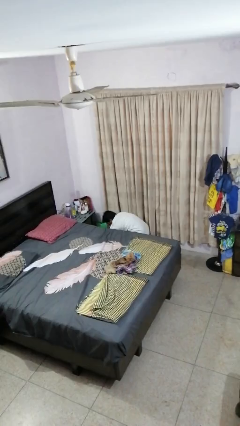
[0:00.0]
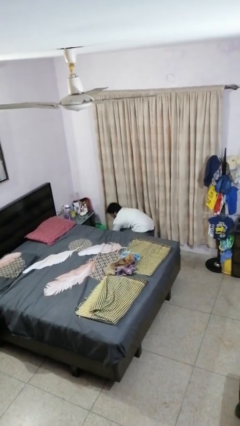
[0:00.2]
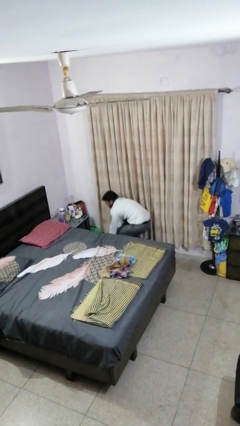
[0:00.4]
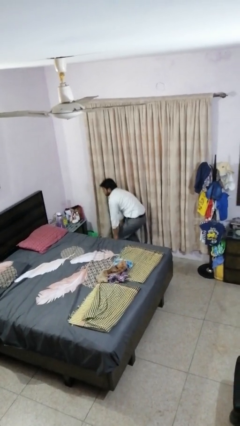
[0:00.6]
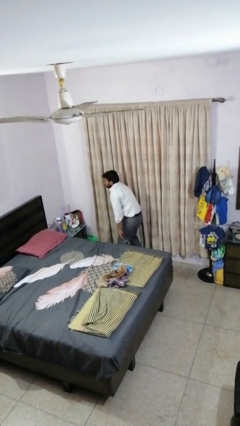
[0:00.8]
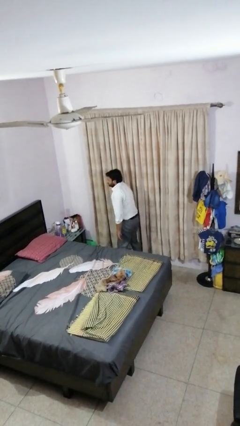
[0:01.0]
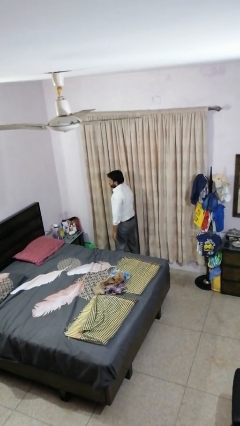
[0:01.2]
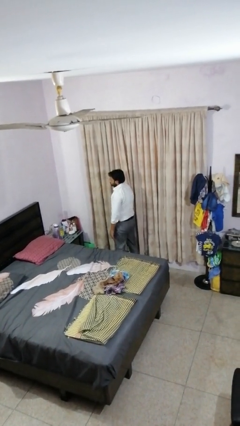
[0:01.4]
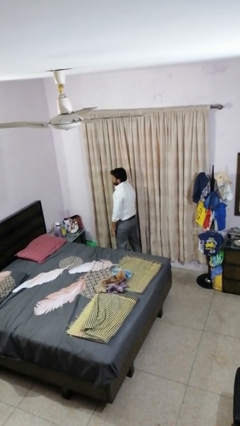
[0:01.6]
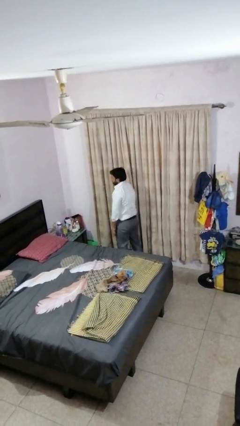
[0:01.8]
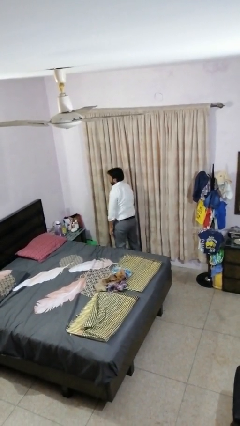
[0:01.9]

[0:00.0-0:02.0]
person stands up from floor

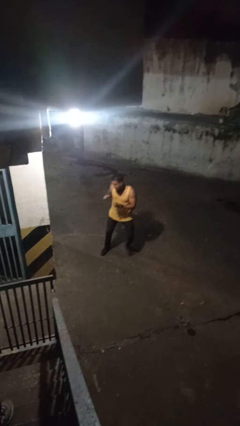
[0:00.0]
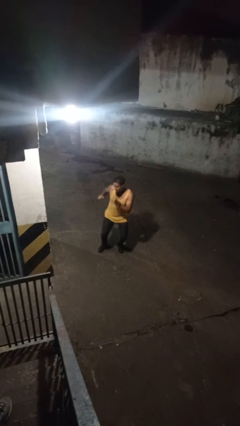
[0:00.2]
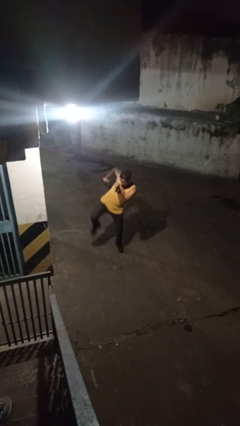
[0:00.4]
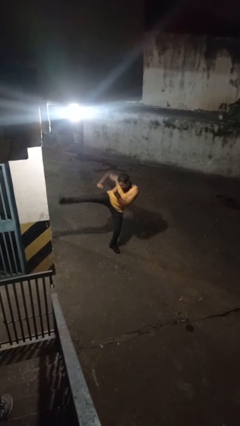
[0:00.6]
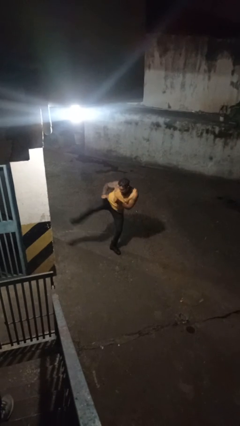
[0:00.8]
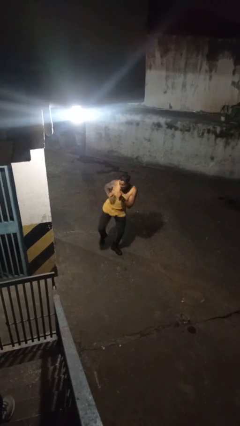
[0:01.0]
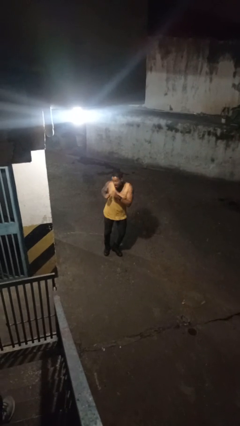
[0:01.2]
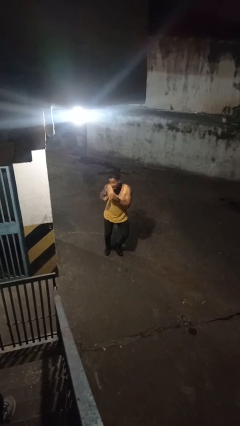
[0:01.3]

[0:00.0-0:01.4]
person karate kicks

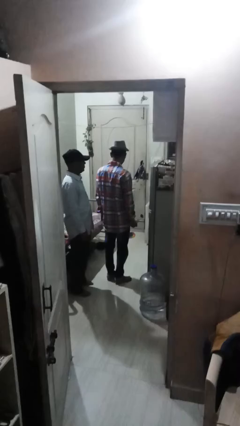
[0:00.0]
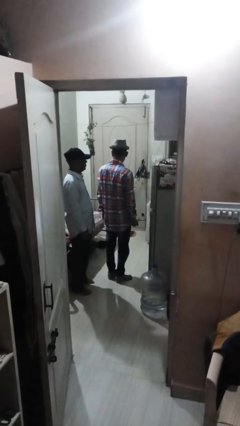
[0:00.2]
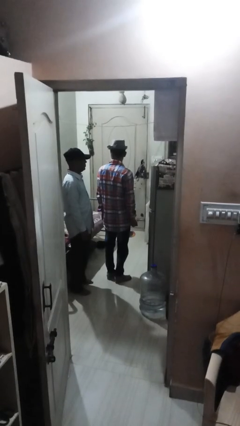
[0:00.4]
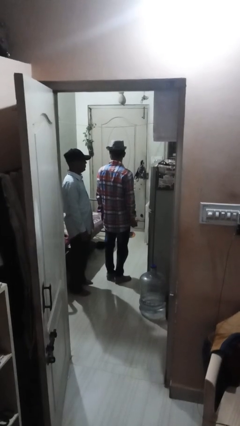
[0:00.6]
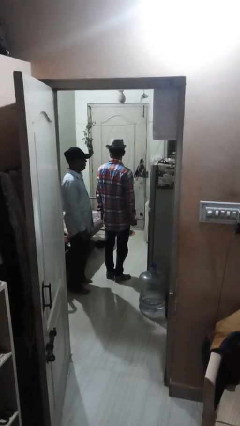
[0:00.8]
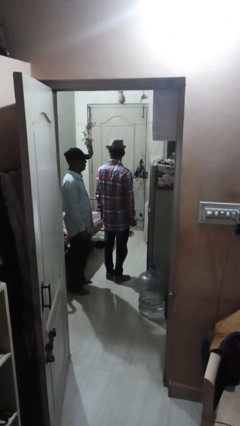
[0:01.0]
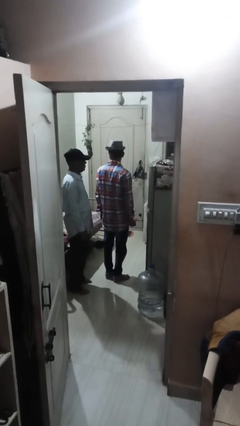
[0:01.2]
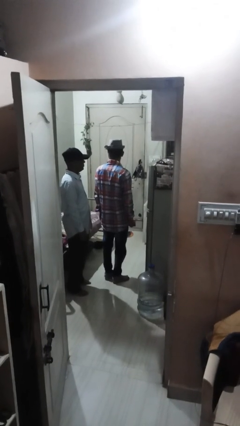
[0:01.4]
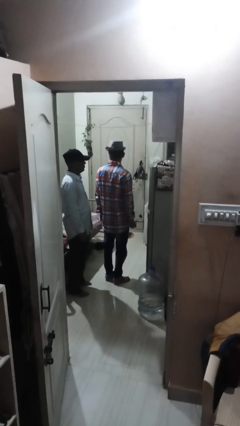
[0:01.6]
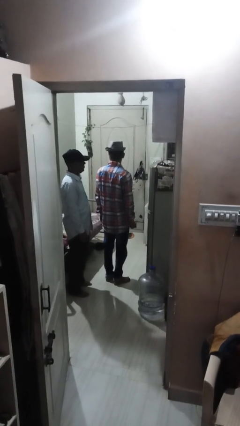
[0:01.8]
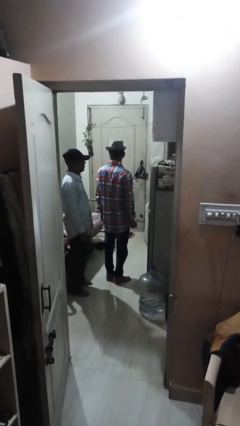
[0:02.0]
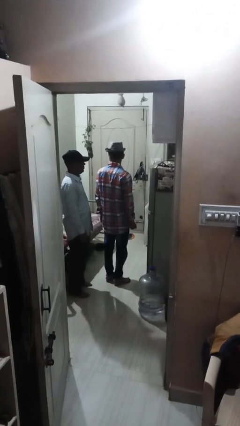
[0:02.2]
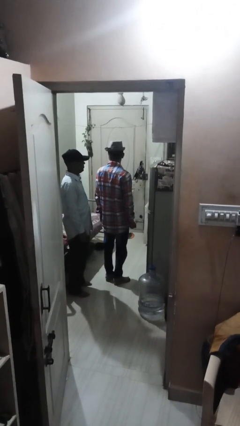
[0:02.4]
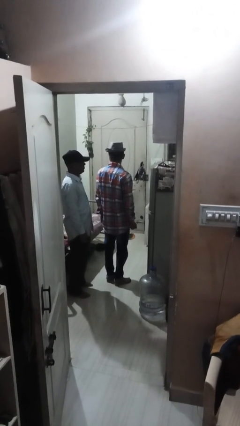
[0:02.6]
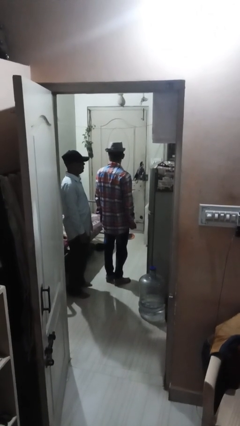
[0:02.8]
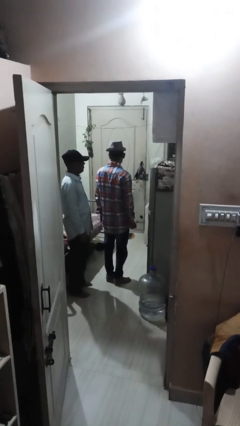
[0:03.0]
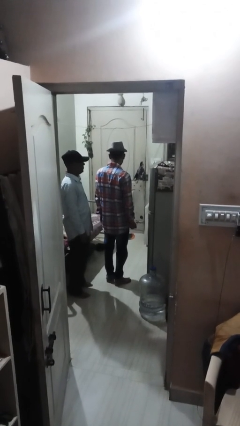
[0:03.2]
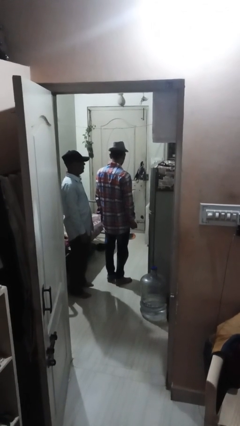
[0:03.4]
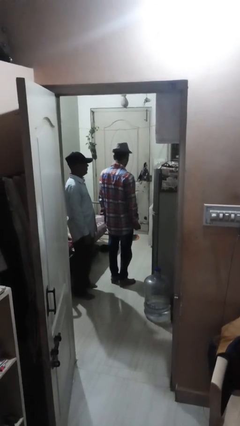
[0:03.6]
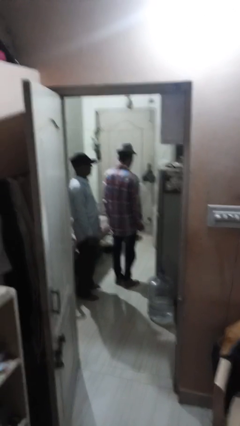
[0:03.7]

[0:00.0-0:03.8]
person looks over shoulder

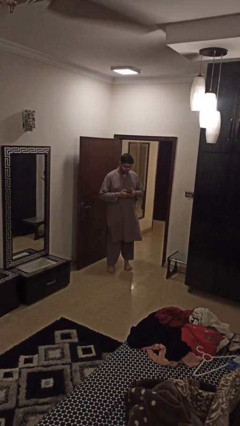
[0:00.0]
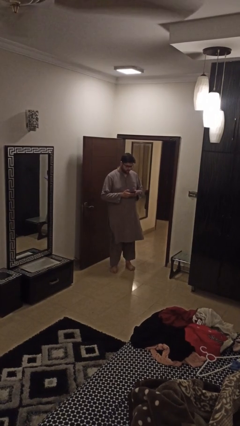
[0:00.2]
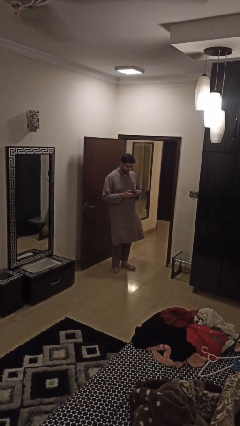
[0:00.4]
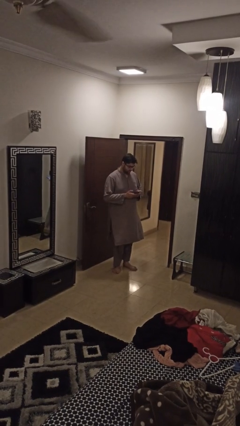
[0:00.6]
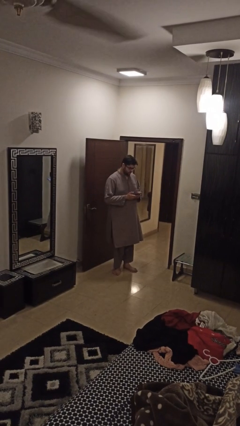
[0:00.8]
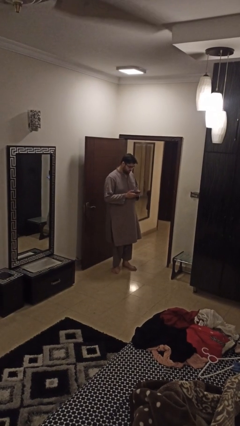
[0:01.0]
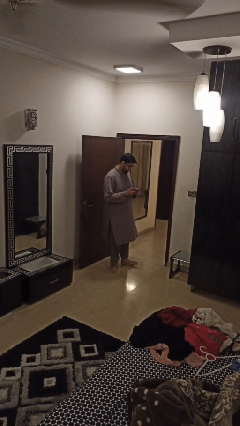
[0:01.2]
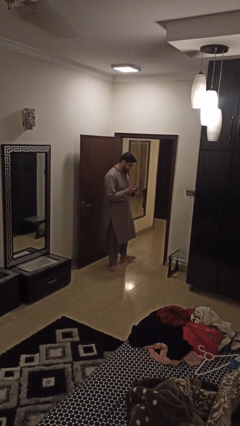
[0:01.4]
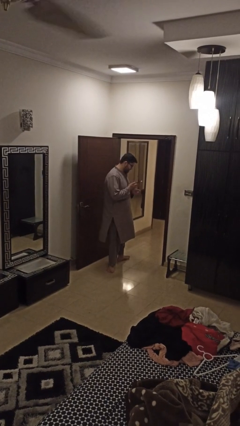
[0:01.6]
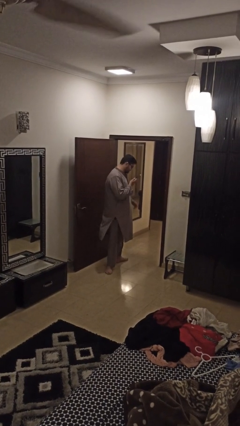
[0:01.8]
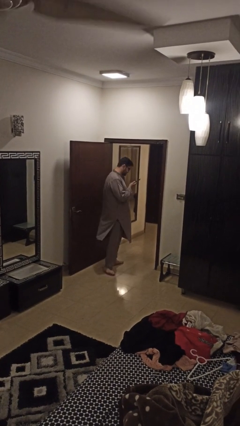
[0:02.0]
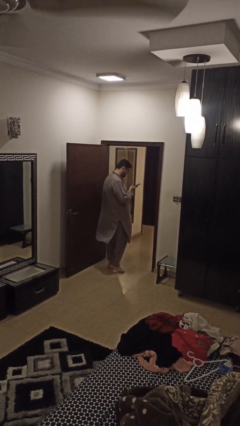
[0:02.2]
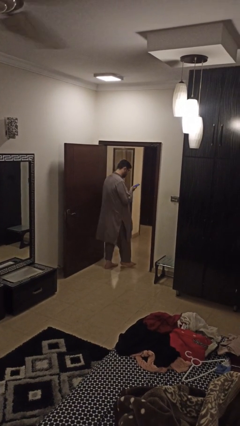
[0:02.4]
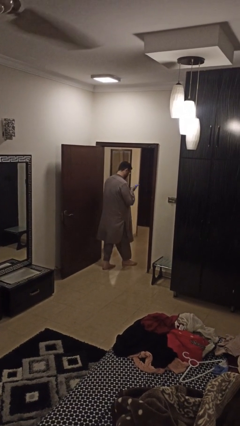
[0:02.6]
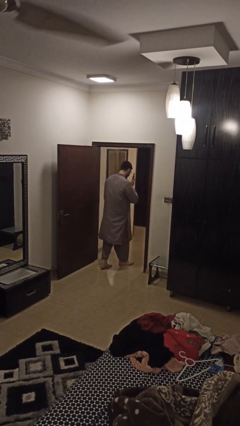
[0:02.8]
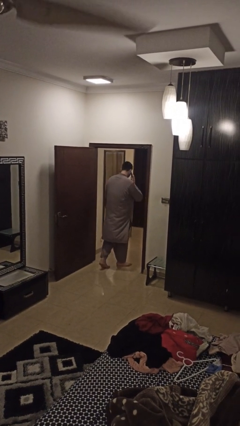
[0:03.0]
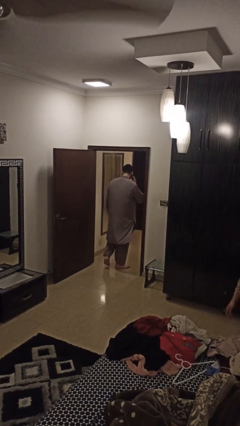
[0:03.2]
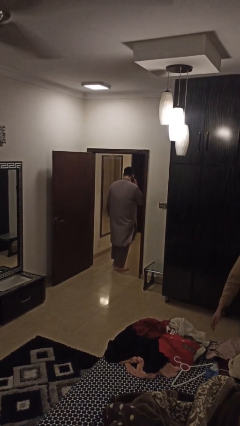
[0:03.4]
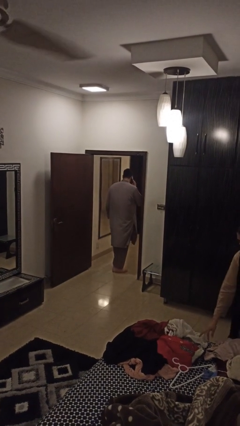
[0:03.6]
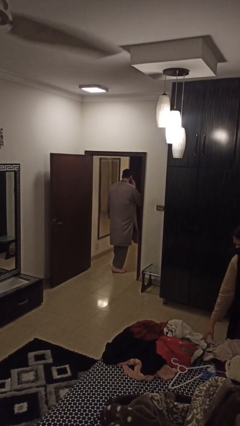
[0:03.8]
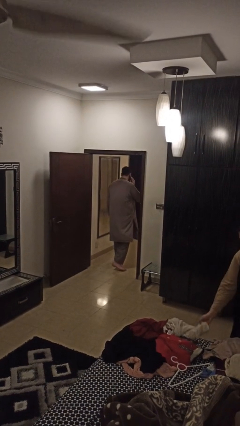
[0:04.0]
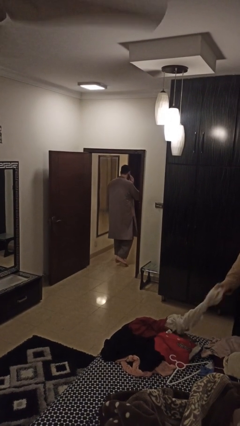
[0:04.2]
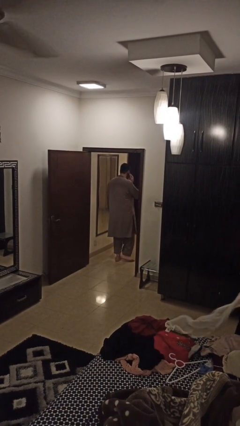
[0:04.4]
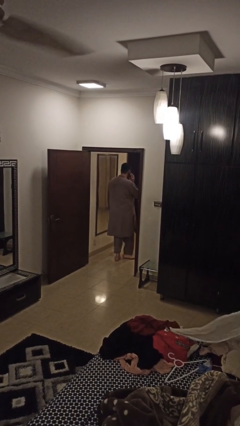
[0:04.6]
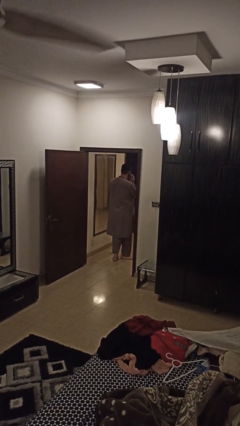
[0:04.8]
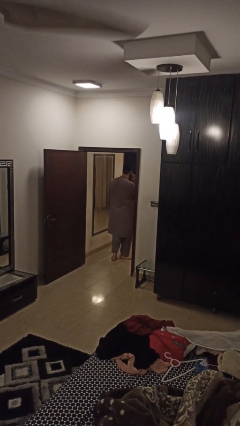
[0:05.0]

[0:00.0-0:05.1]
person exits scene through structure

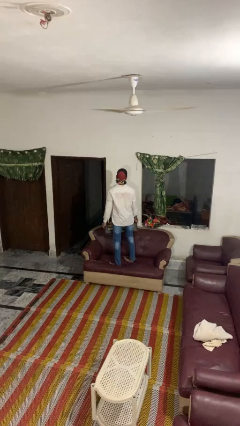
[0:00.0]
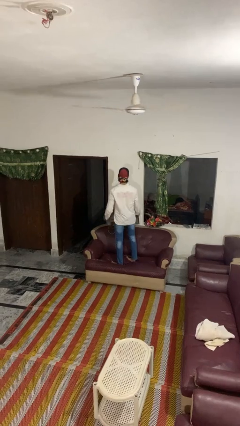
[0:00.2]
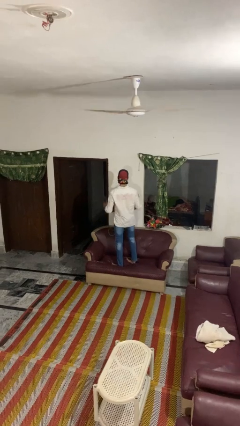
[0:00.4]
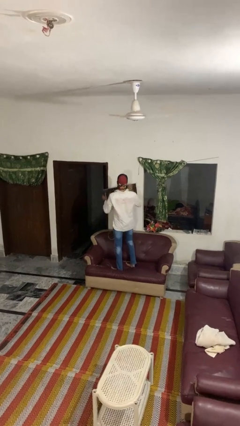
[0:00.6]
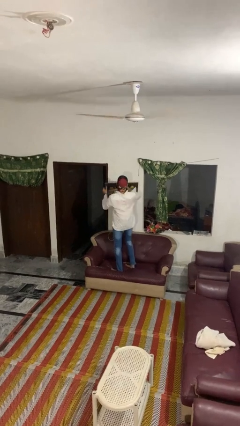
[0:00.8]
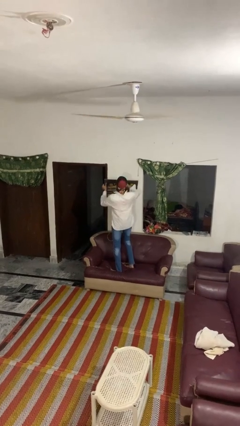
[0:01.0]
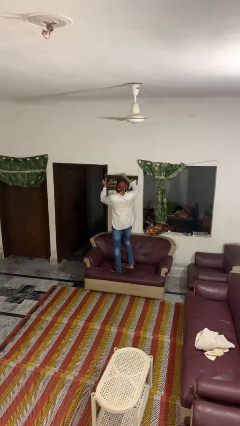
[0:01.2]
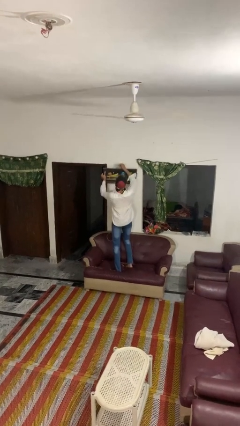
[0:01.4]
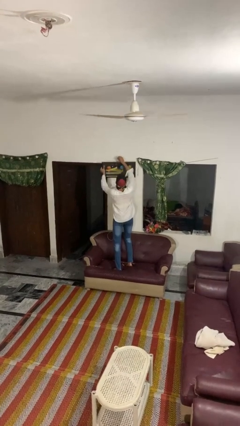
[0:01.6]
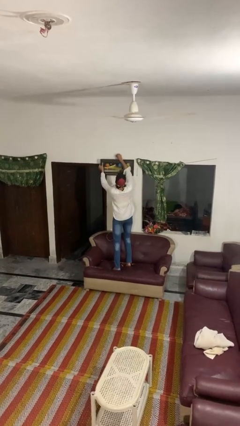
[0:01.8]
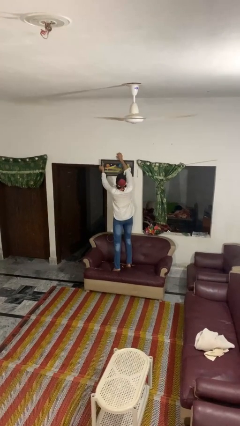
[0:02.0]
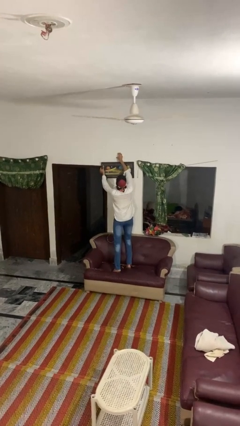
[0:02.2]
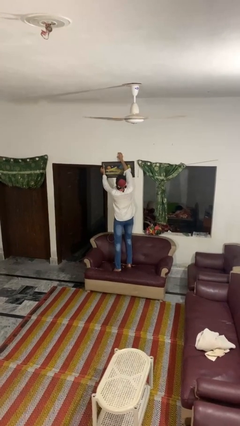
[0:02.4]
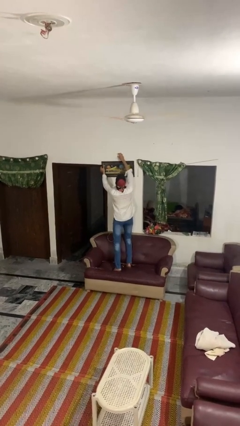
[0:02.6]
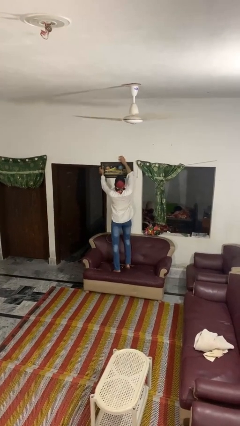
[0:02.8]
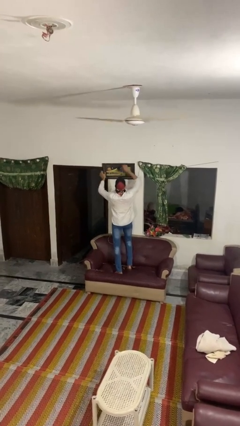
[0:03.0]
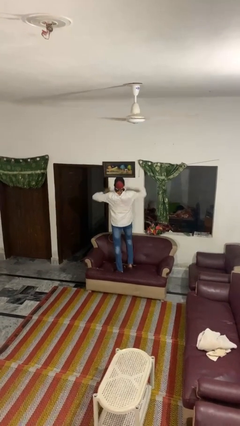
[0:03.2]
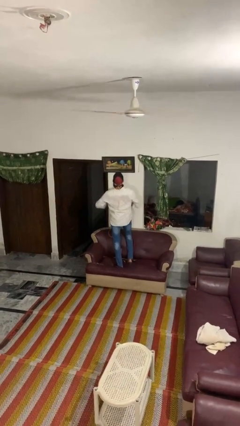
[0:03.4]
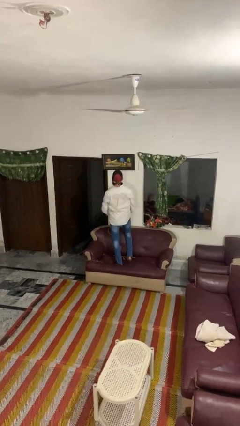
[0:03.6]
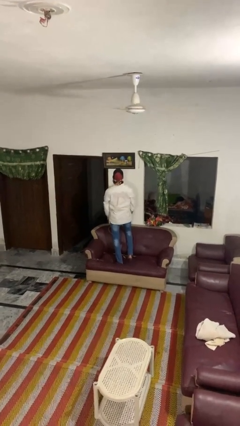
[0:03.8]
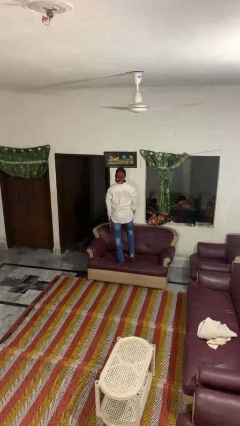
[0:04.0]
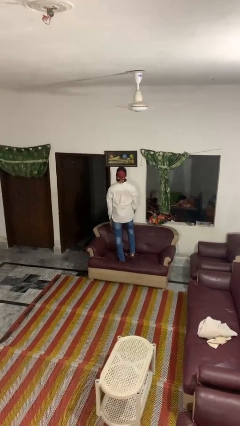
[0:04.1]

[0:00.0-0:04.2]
person puts up picture frame

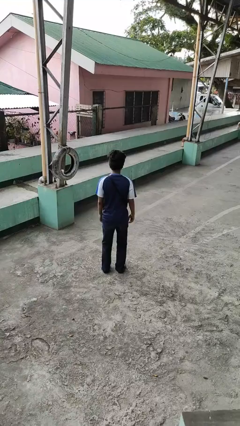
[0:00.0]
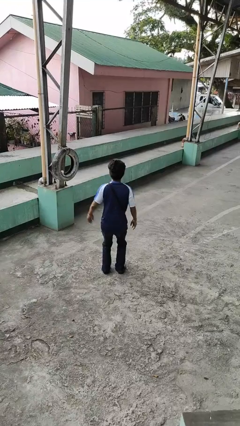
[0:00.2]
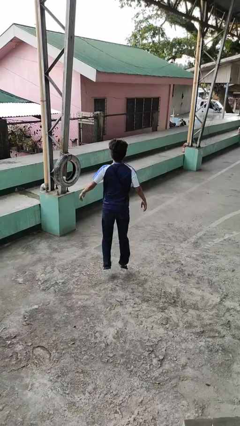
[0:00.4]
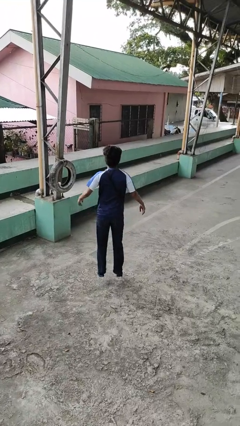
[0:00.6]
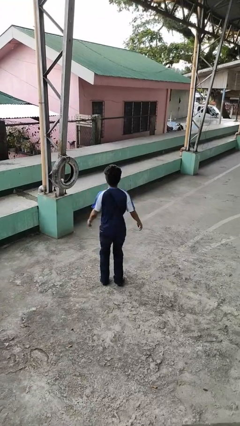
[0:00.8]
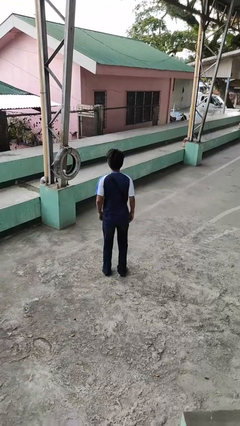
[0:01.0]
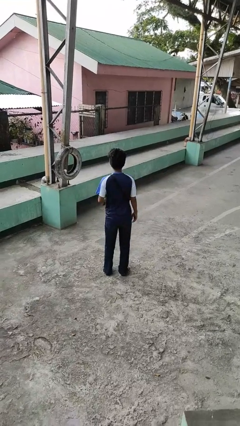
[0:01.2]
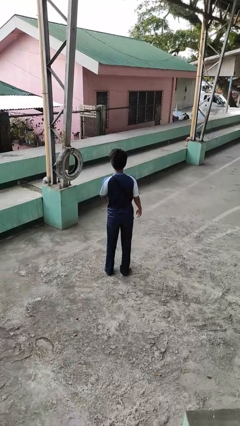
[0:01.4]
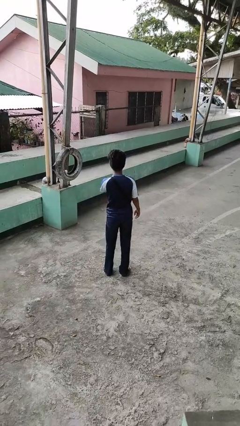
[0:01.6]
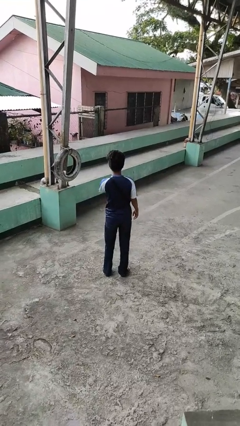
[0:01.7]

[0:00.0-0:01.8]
person jumps
